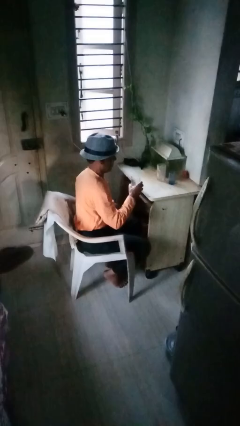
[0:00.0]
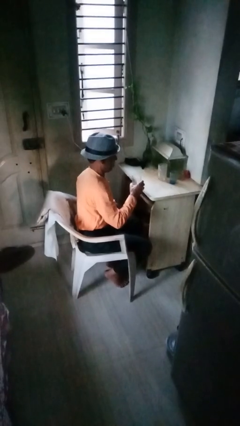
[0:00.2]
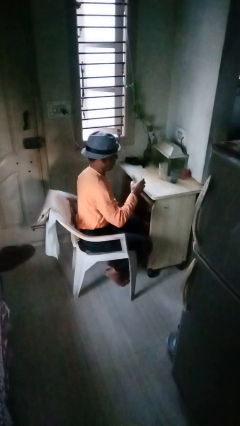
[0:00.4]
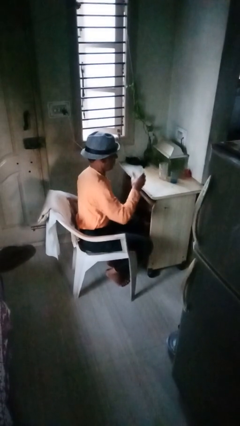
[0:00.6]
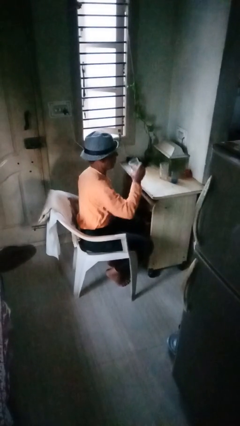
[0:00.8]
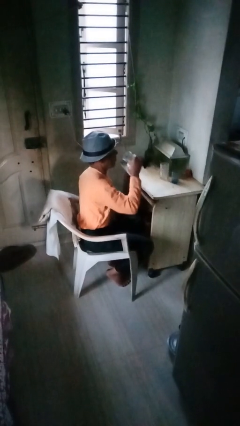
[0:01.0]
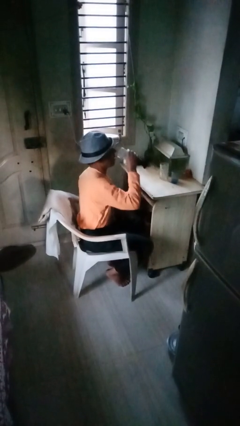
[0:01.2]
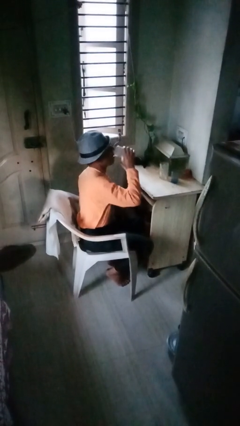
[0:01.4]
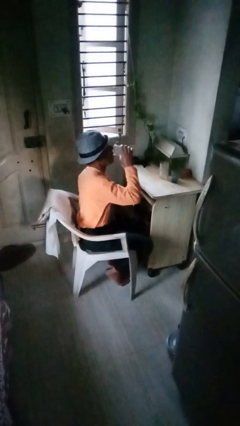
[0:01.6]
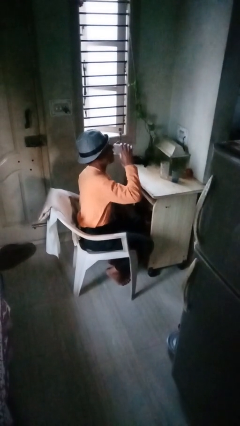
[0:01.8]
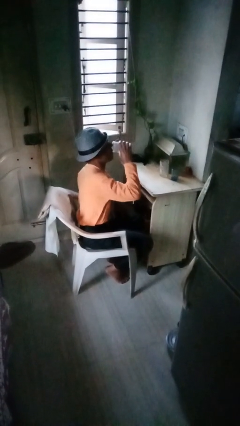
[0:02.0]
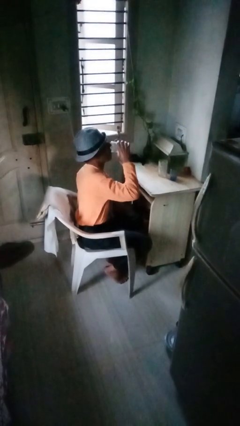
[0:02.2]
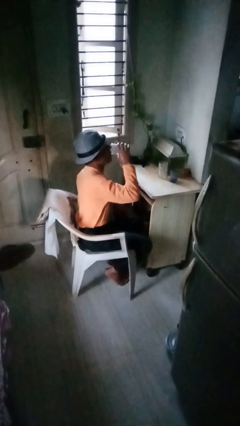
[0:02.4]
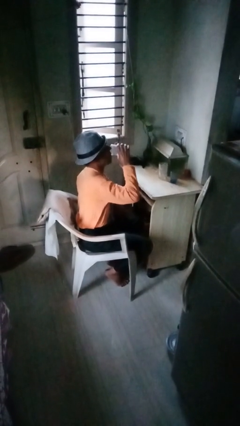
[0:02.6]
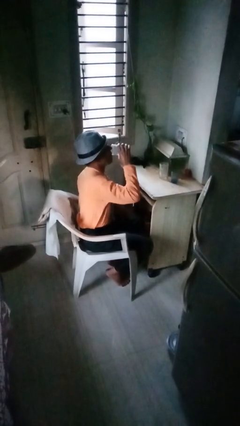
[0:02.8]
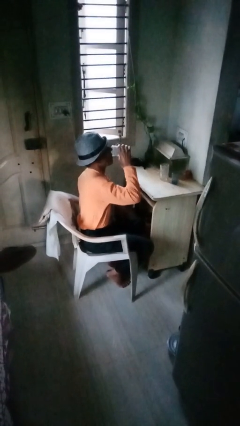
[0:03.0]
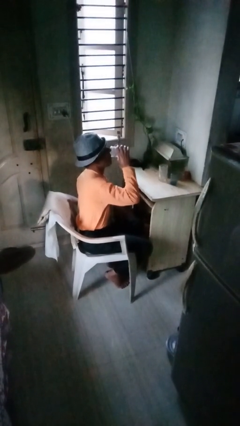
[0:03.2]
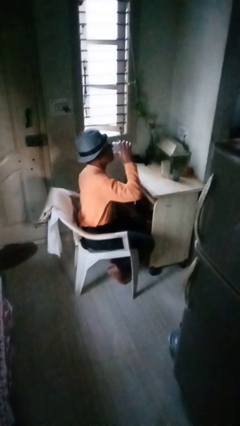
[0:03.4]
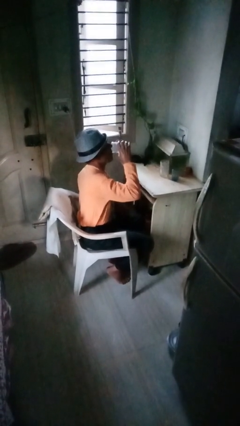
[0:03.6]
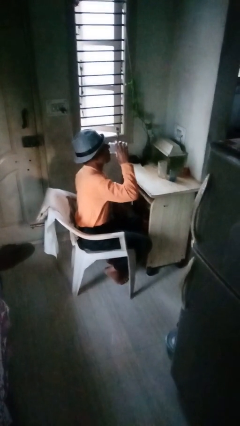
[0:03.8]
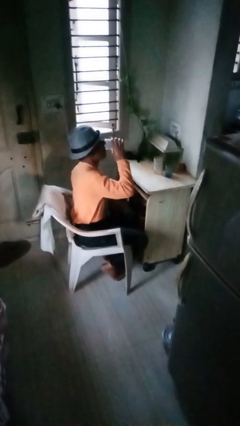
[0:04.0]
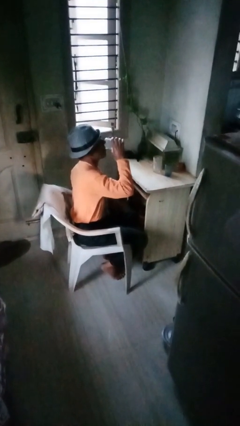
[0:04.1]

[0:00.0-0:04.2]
person drinks from shotglass

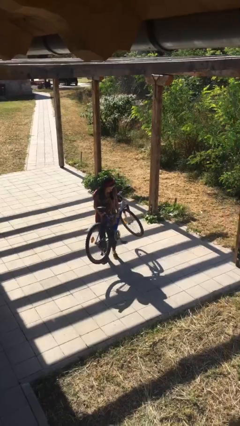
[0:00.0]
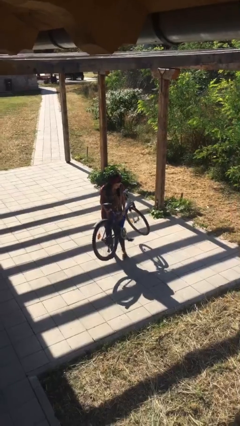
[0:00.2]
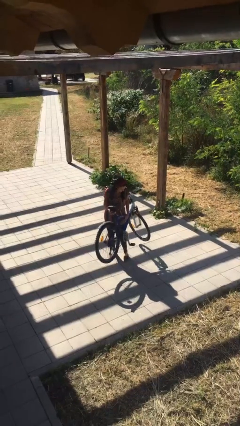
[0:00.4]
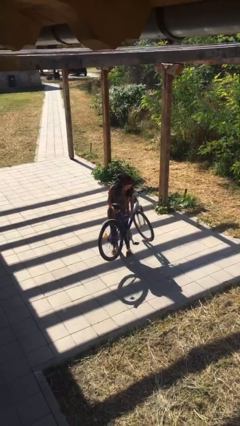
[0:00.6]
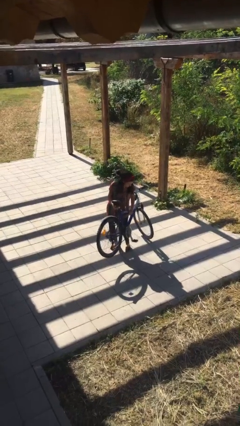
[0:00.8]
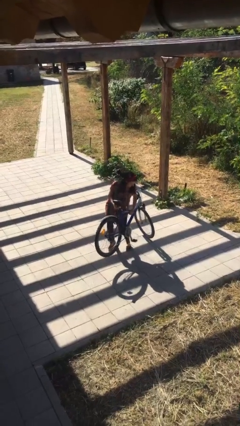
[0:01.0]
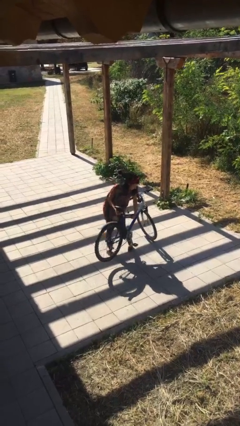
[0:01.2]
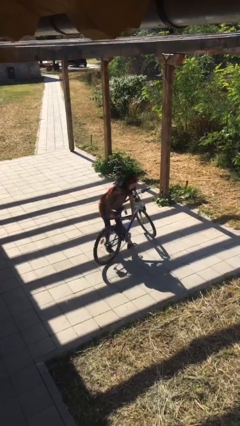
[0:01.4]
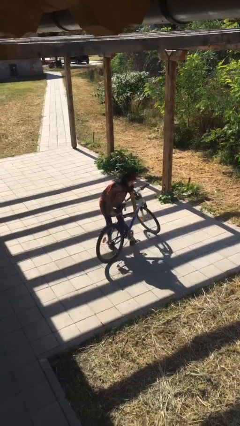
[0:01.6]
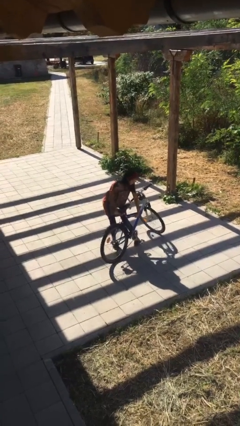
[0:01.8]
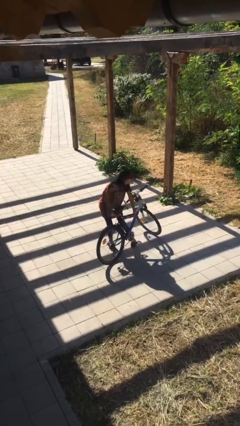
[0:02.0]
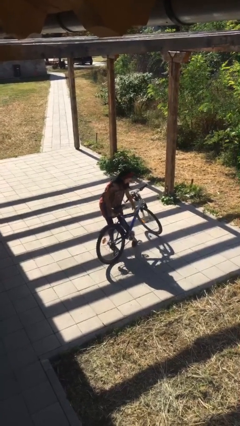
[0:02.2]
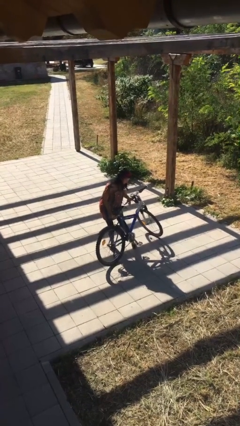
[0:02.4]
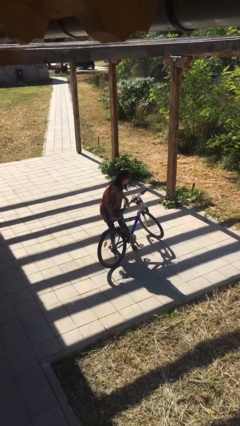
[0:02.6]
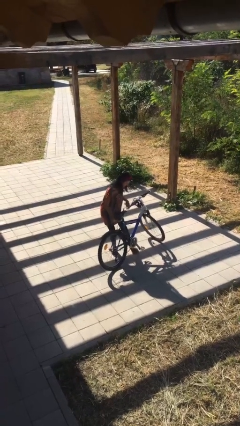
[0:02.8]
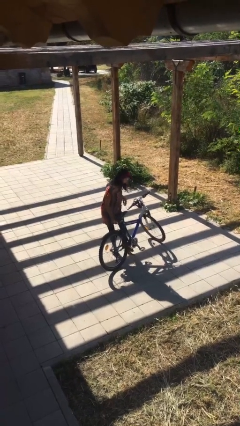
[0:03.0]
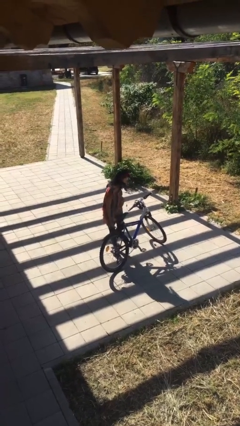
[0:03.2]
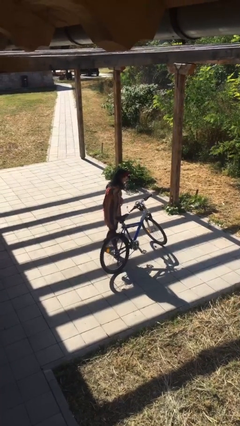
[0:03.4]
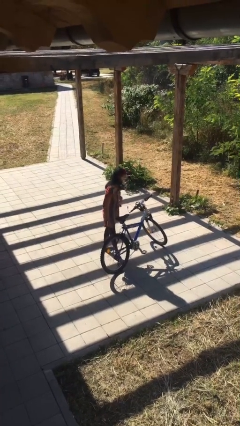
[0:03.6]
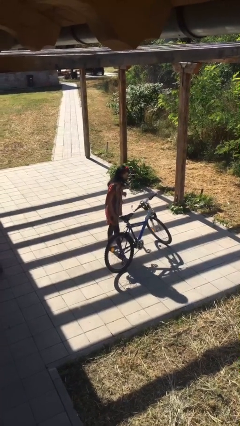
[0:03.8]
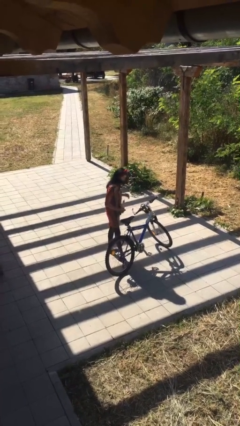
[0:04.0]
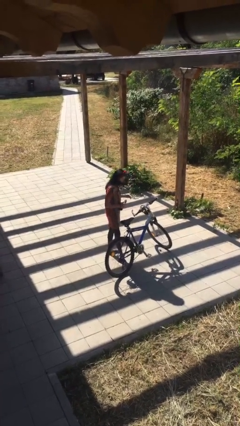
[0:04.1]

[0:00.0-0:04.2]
person puts down object on floor

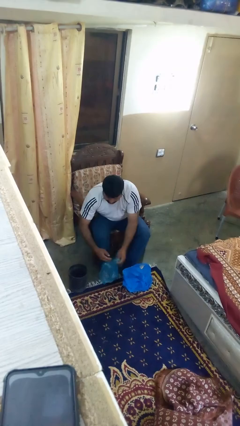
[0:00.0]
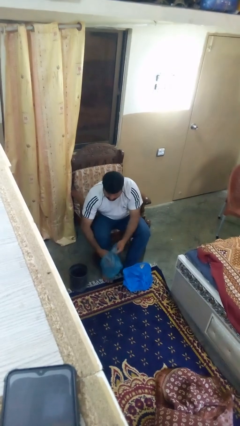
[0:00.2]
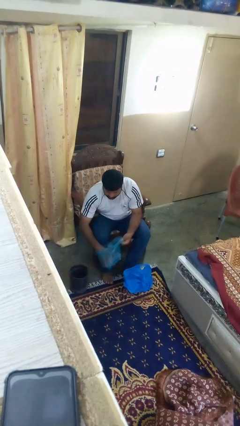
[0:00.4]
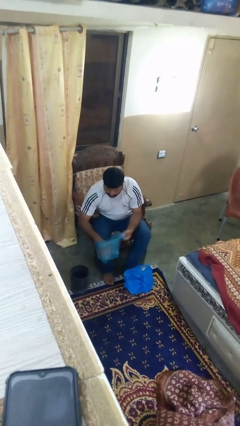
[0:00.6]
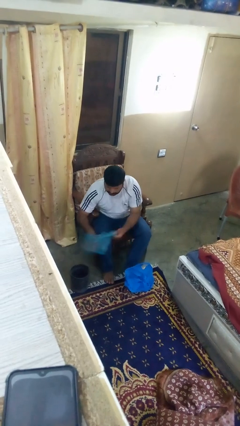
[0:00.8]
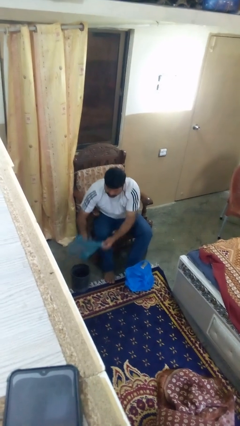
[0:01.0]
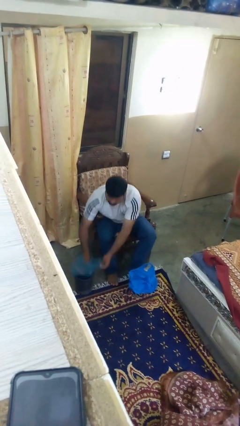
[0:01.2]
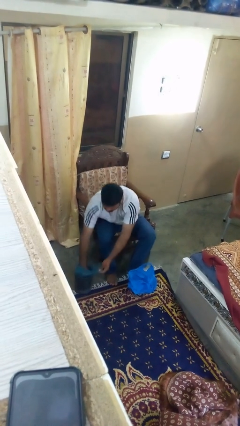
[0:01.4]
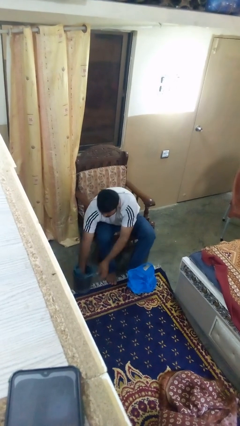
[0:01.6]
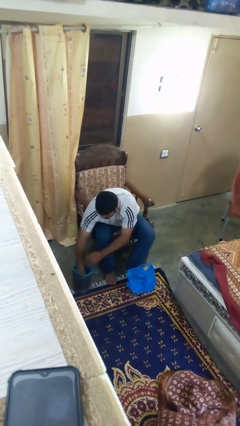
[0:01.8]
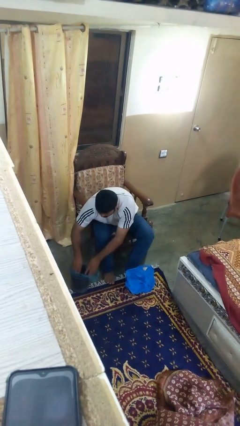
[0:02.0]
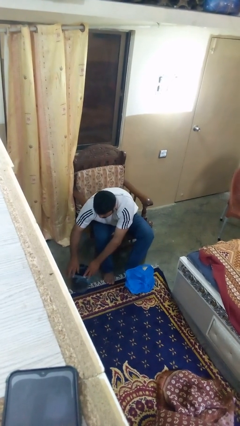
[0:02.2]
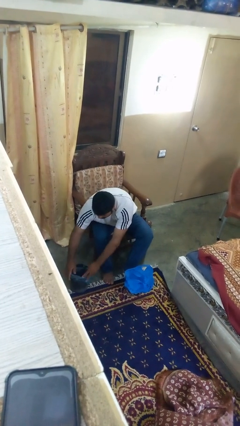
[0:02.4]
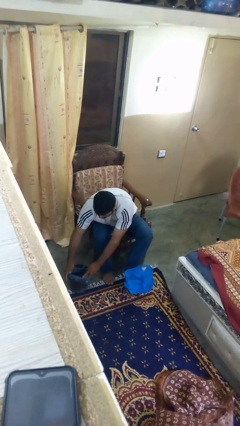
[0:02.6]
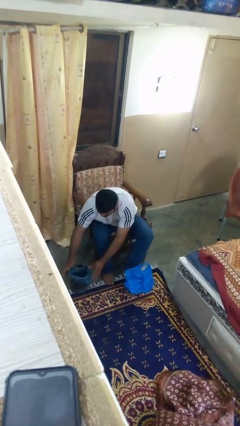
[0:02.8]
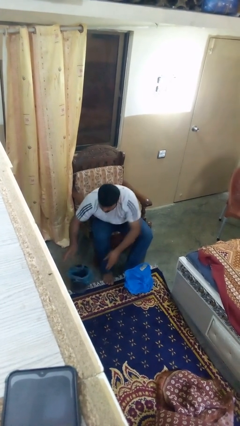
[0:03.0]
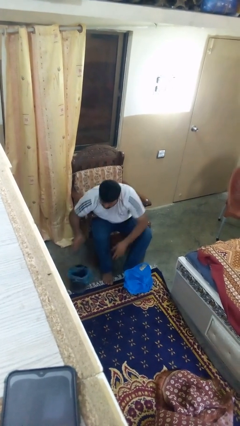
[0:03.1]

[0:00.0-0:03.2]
person inserts trashbag into trashcan

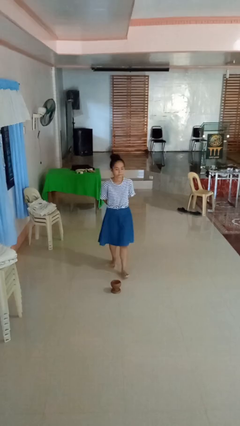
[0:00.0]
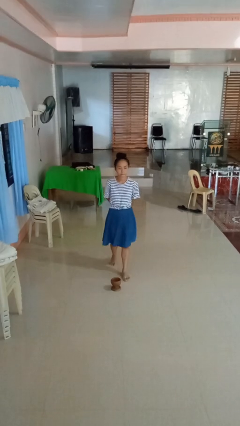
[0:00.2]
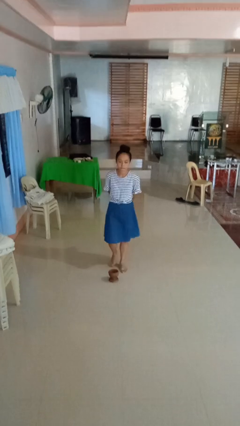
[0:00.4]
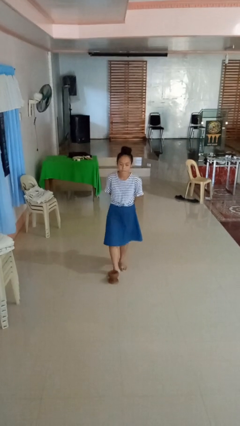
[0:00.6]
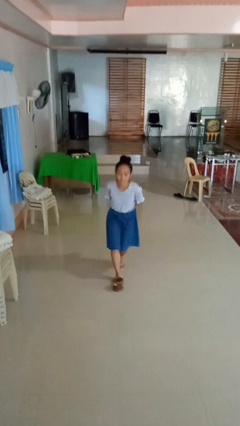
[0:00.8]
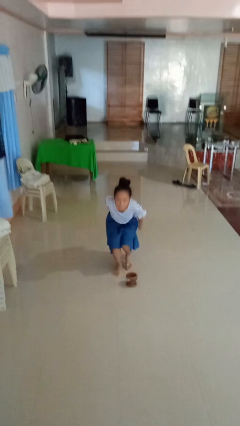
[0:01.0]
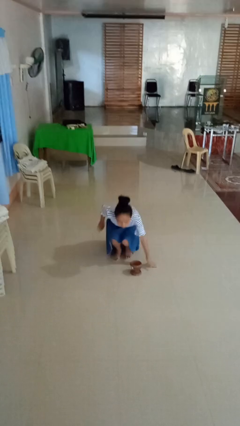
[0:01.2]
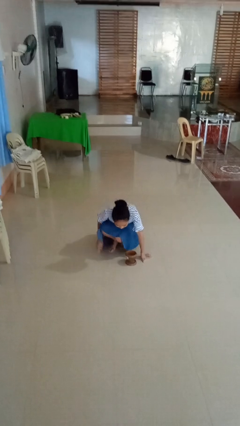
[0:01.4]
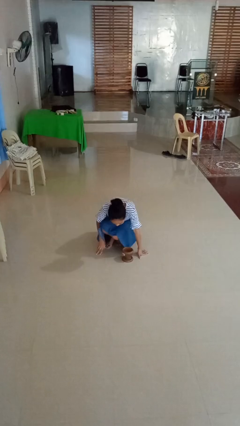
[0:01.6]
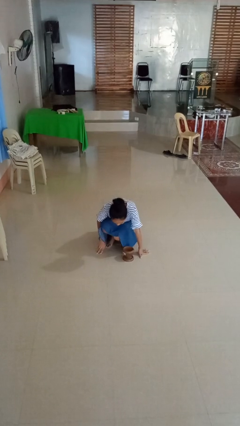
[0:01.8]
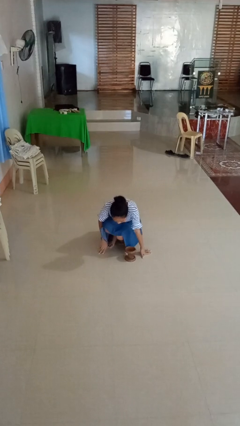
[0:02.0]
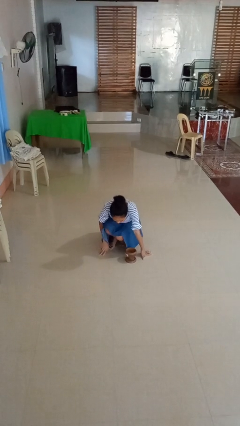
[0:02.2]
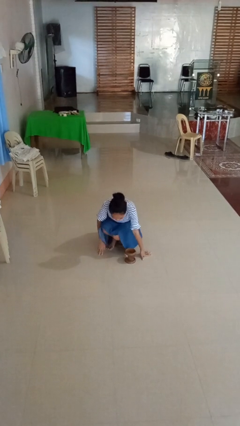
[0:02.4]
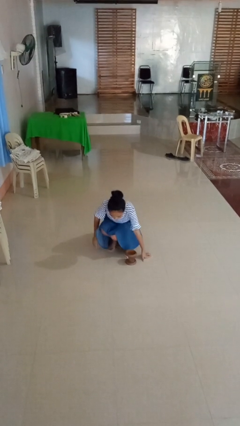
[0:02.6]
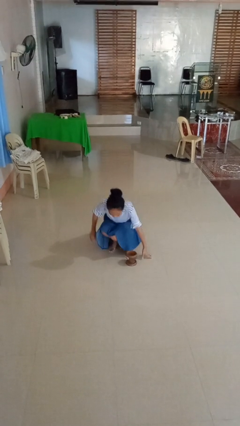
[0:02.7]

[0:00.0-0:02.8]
person trips on object on floor

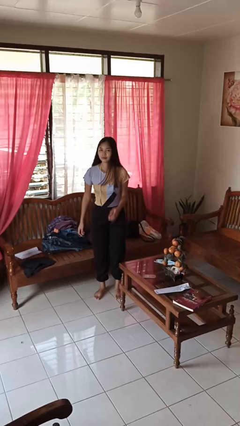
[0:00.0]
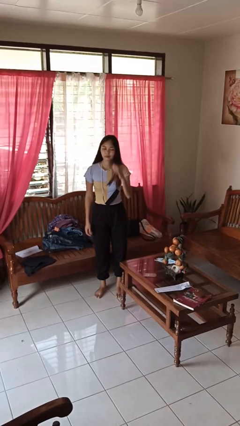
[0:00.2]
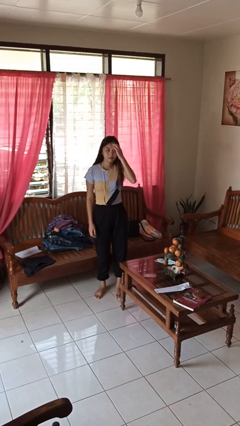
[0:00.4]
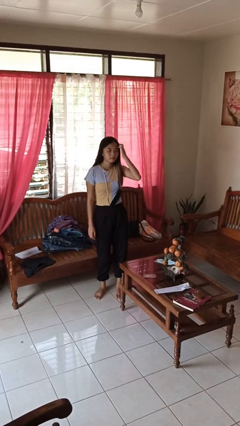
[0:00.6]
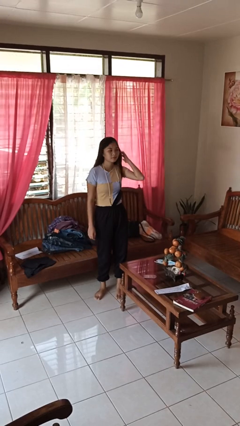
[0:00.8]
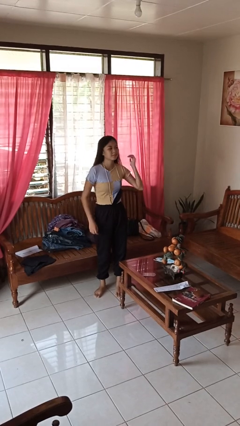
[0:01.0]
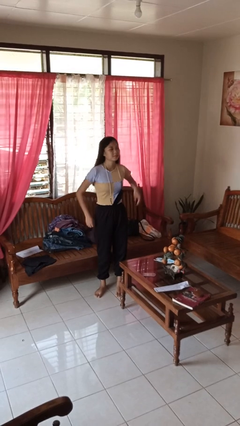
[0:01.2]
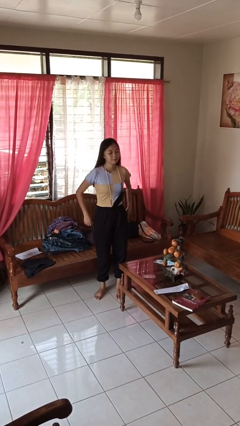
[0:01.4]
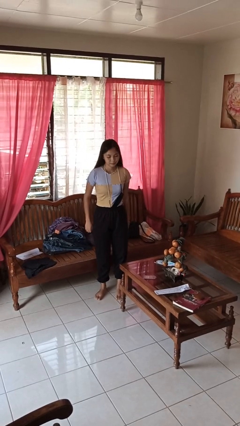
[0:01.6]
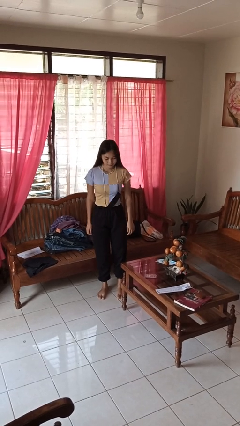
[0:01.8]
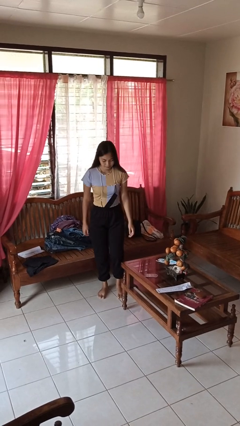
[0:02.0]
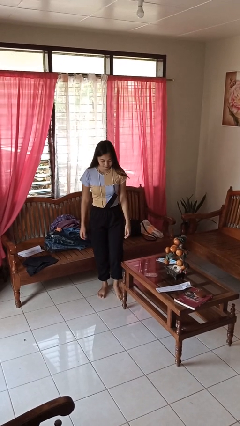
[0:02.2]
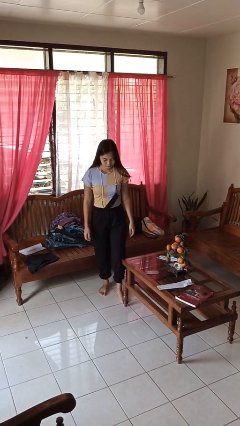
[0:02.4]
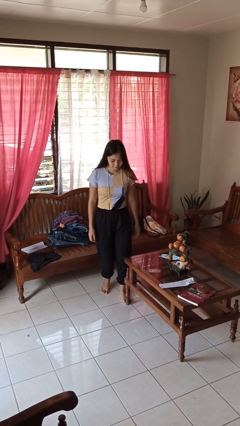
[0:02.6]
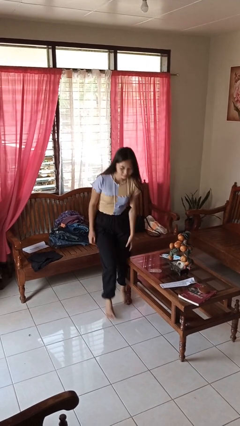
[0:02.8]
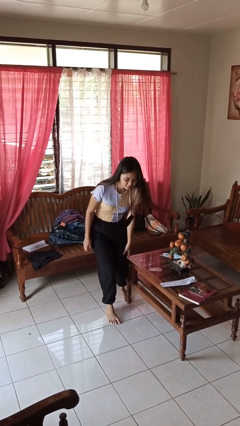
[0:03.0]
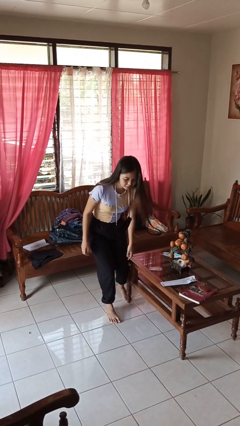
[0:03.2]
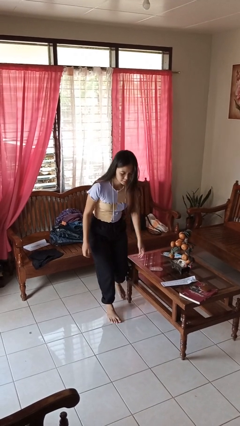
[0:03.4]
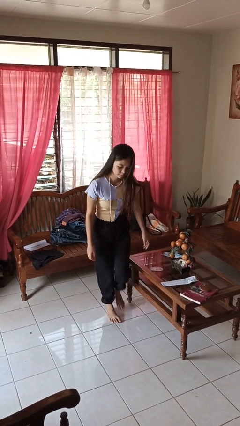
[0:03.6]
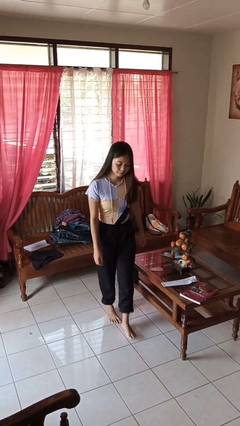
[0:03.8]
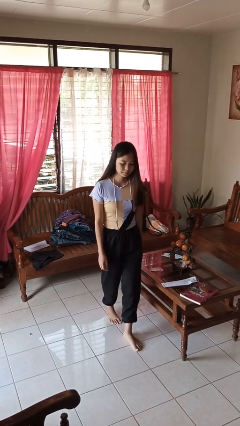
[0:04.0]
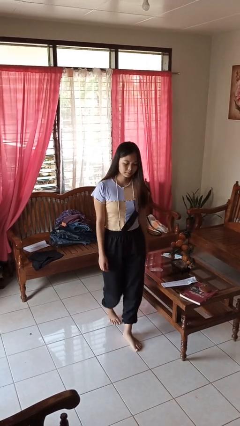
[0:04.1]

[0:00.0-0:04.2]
person bumps into table
